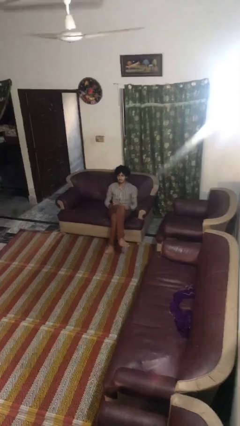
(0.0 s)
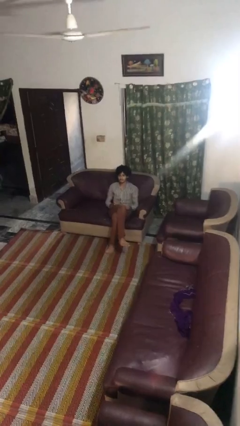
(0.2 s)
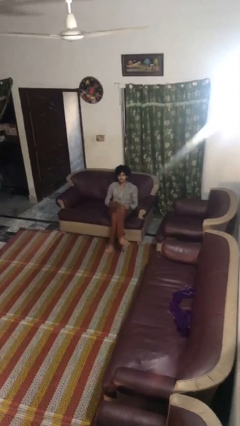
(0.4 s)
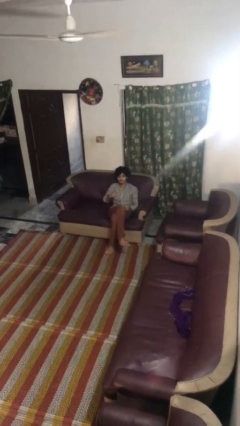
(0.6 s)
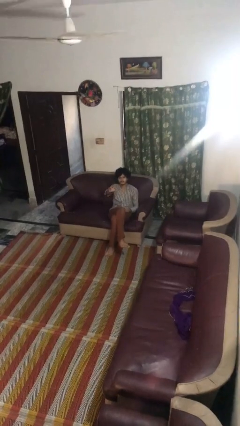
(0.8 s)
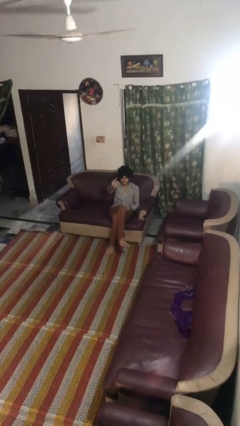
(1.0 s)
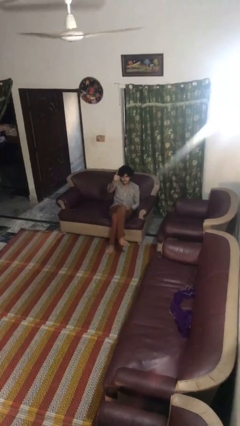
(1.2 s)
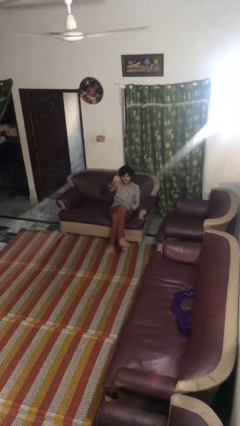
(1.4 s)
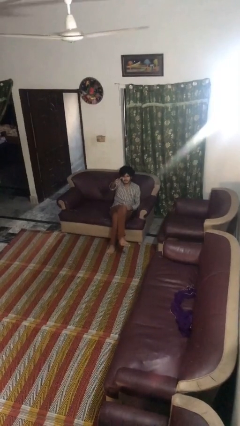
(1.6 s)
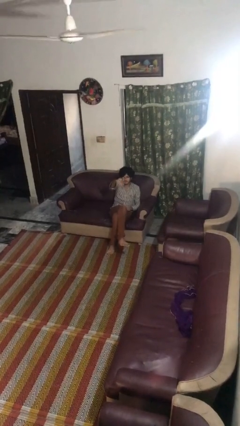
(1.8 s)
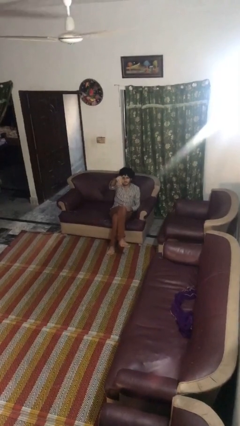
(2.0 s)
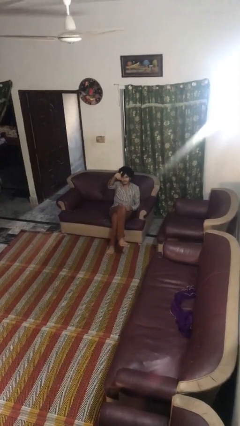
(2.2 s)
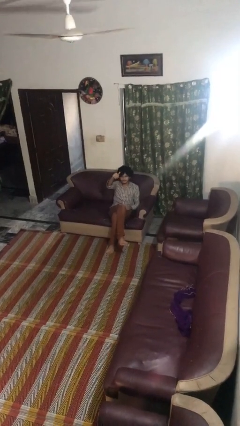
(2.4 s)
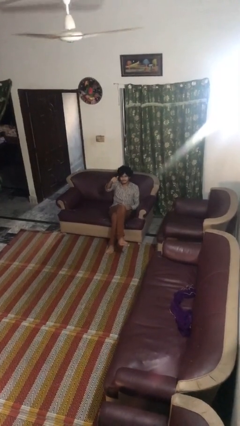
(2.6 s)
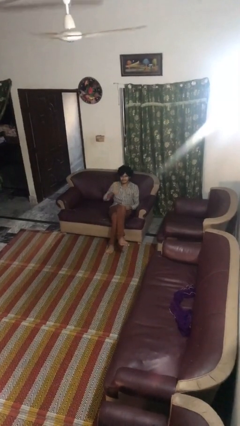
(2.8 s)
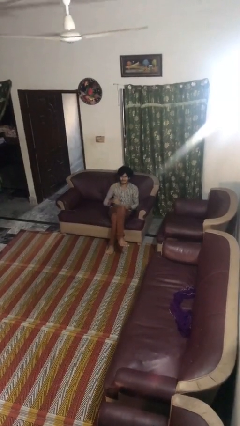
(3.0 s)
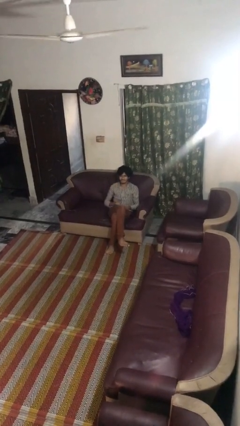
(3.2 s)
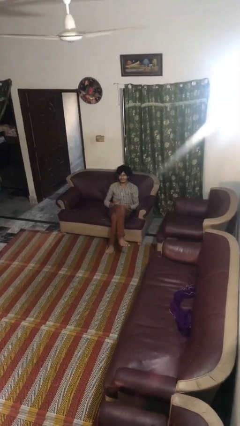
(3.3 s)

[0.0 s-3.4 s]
person gestures come here

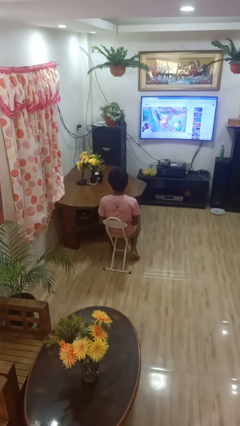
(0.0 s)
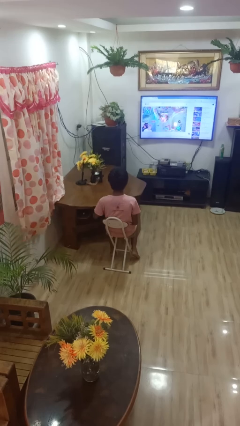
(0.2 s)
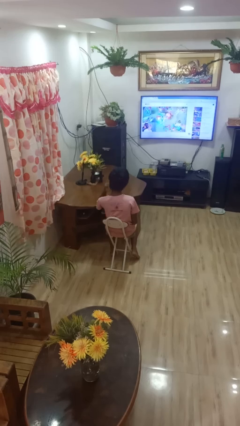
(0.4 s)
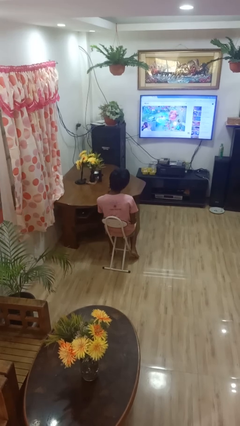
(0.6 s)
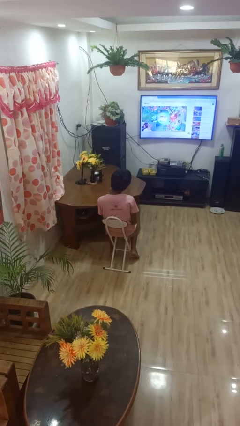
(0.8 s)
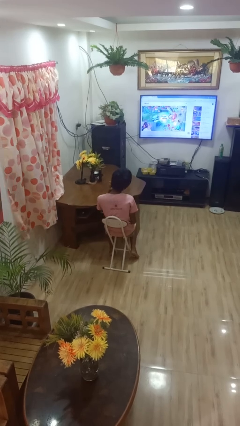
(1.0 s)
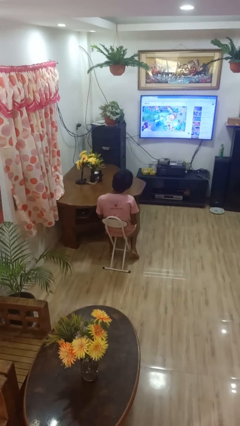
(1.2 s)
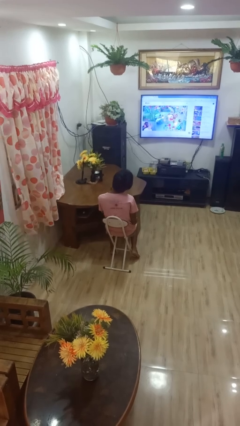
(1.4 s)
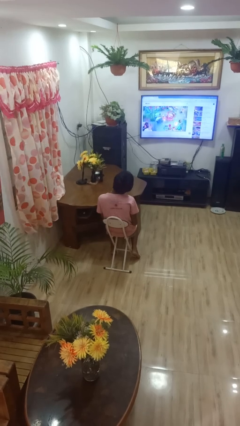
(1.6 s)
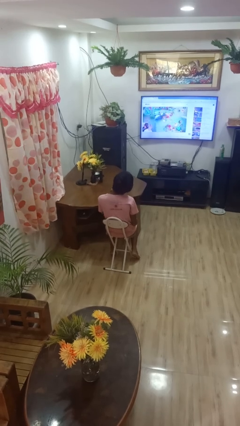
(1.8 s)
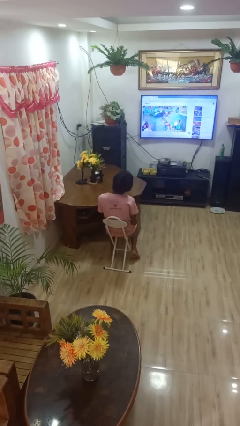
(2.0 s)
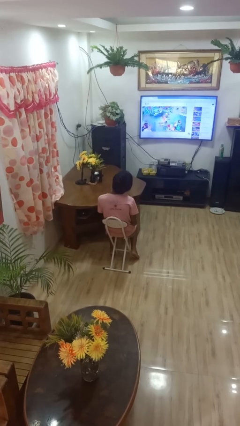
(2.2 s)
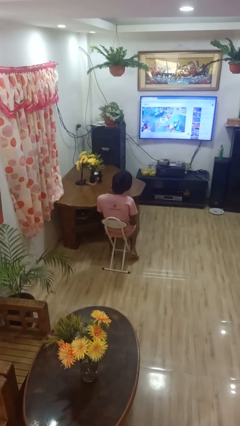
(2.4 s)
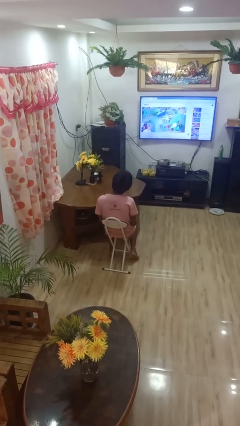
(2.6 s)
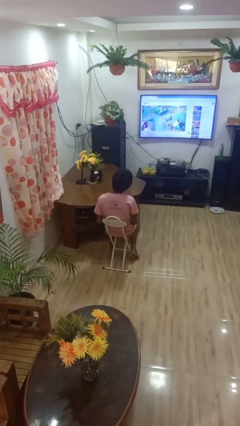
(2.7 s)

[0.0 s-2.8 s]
person rubs neck

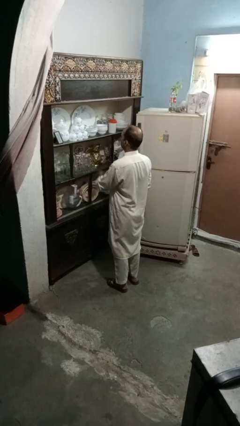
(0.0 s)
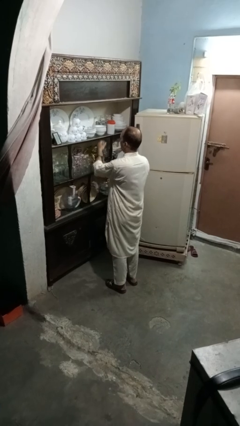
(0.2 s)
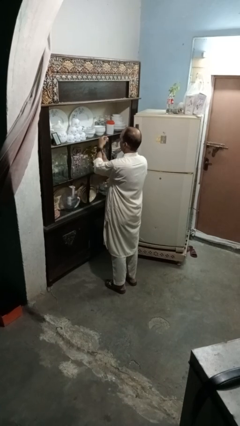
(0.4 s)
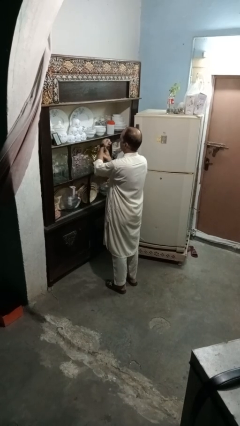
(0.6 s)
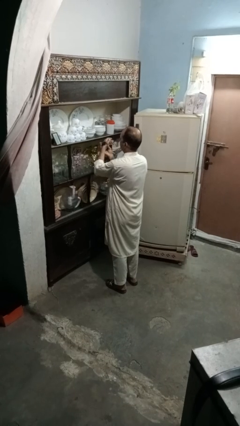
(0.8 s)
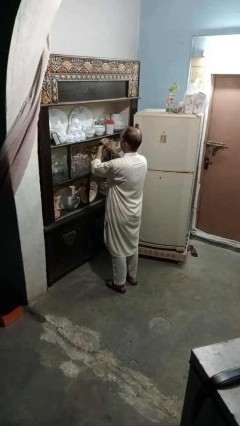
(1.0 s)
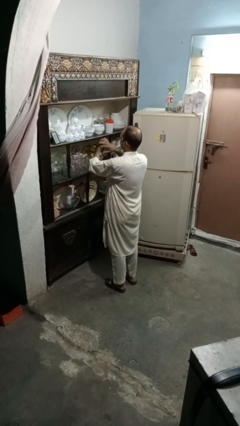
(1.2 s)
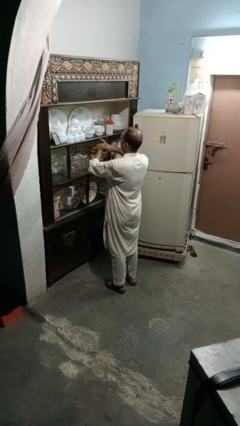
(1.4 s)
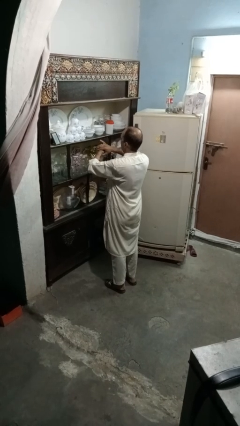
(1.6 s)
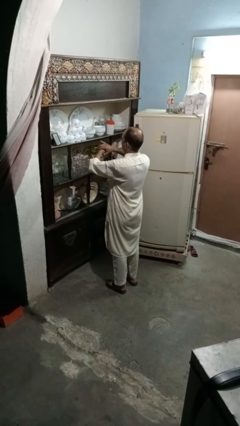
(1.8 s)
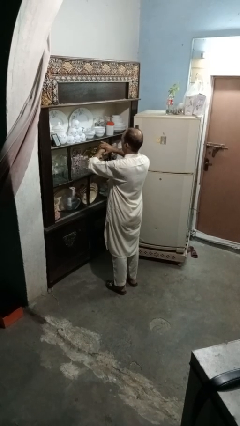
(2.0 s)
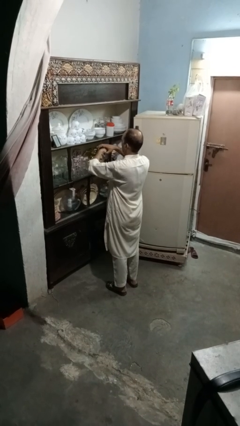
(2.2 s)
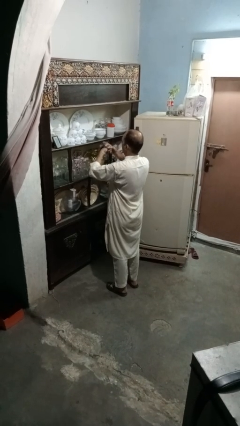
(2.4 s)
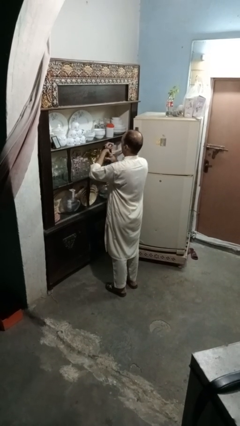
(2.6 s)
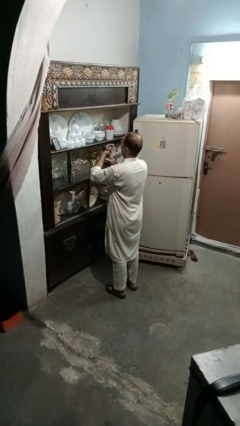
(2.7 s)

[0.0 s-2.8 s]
person takes off wristwatch

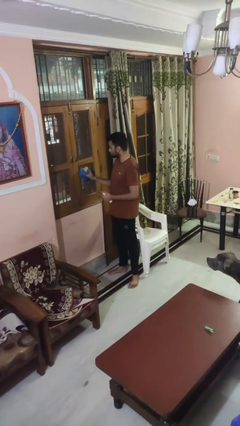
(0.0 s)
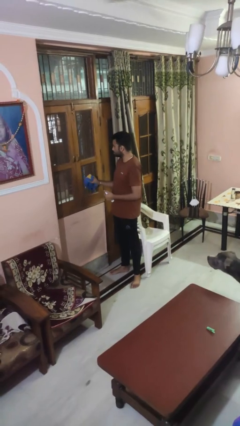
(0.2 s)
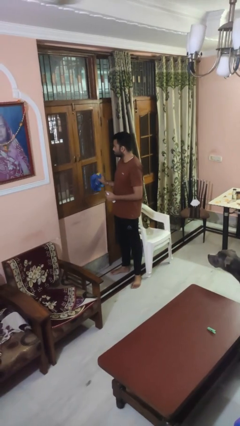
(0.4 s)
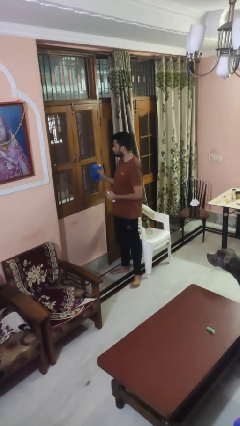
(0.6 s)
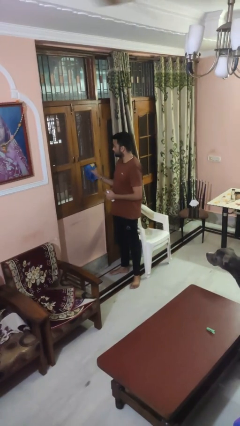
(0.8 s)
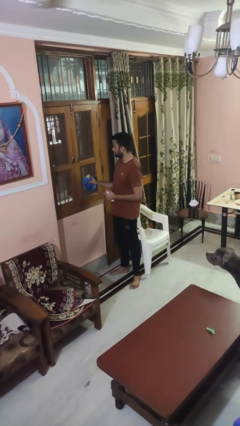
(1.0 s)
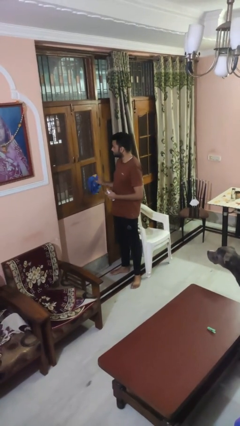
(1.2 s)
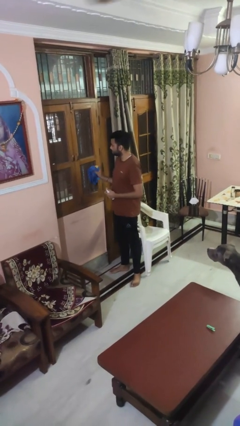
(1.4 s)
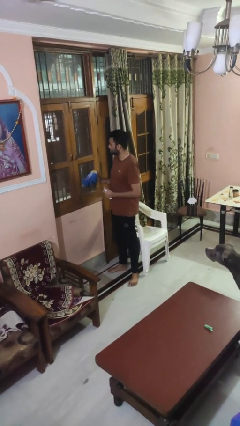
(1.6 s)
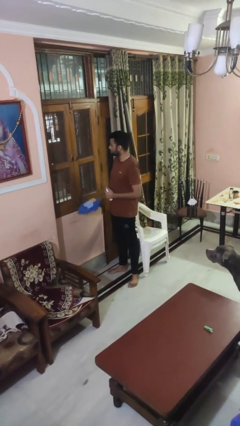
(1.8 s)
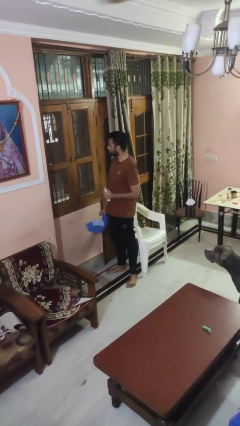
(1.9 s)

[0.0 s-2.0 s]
person washes window

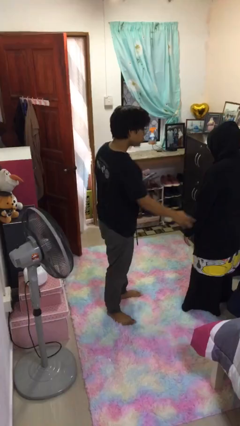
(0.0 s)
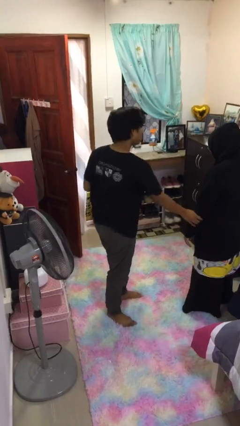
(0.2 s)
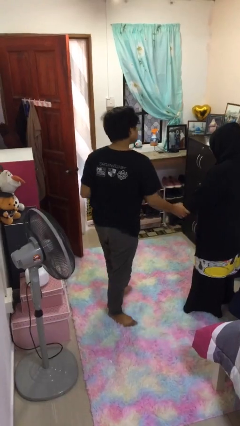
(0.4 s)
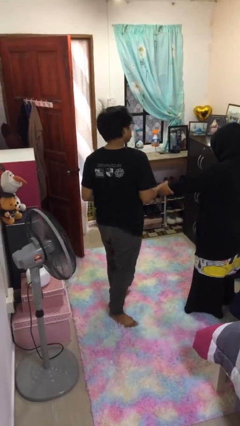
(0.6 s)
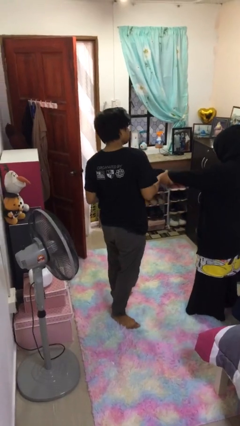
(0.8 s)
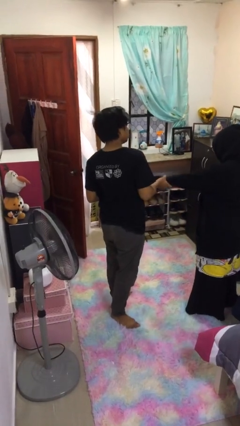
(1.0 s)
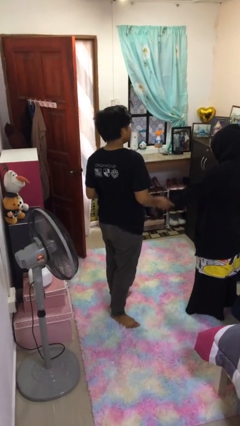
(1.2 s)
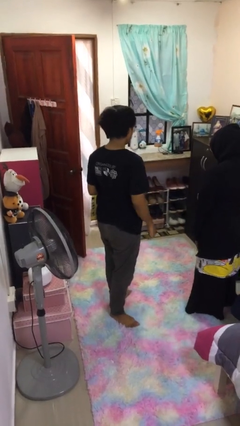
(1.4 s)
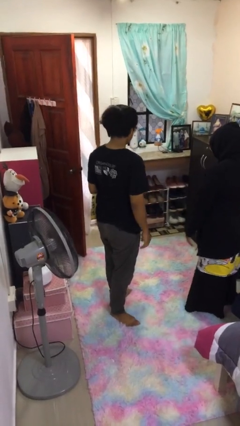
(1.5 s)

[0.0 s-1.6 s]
person grabs person by forearm

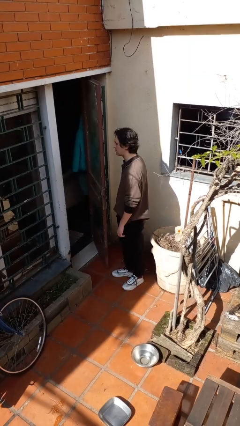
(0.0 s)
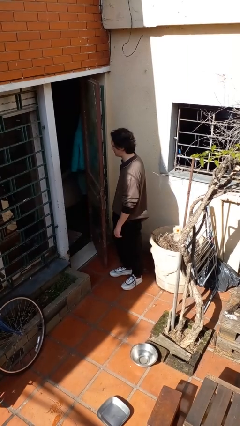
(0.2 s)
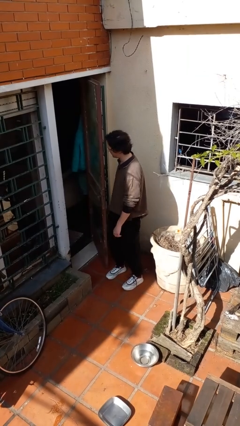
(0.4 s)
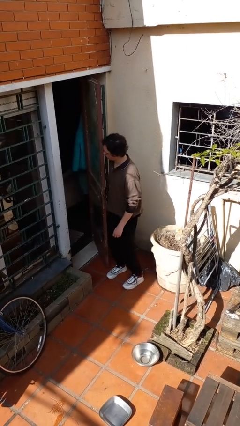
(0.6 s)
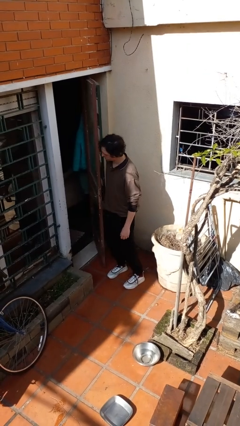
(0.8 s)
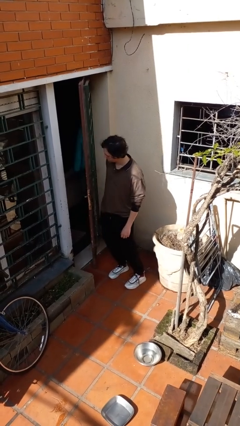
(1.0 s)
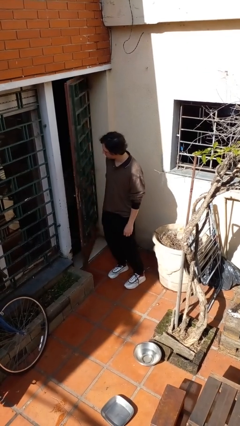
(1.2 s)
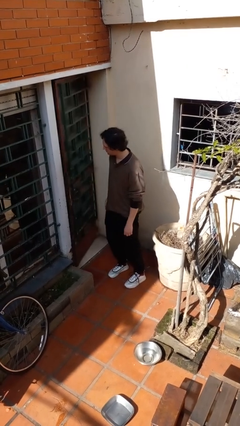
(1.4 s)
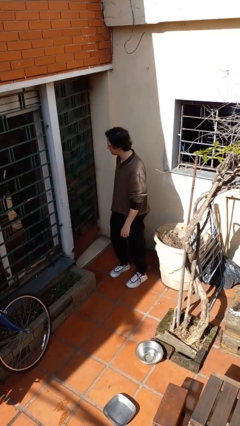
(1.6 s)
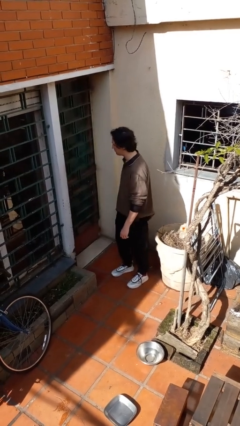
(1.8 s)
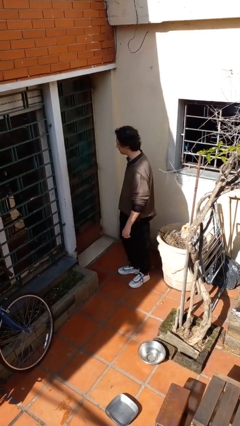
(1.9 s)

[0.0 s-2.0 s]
person closes door with hip

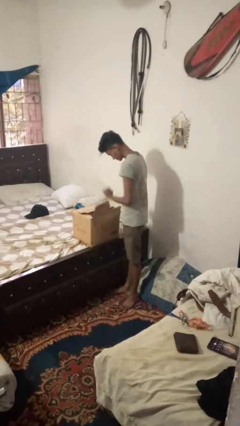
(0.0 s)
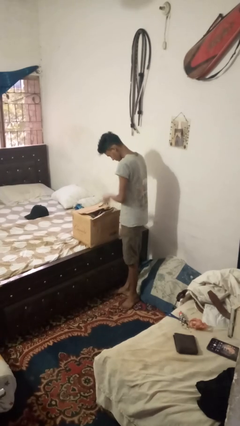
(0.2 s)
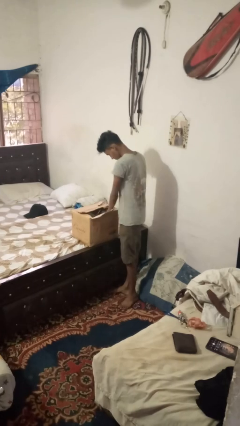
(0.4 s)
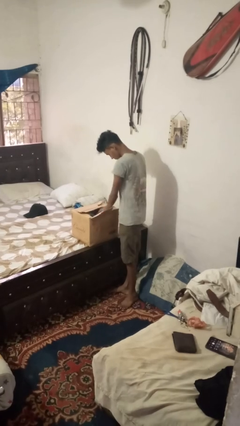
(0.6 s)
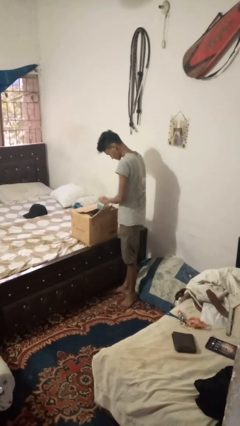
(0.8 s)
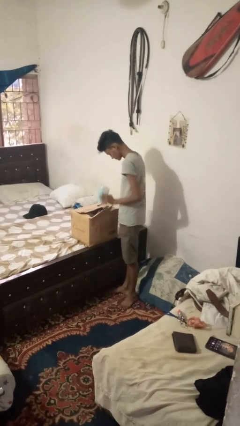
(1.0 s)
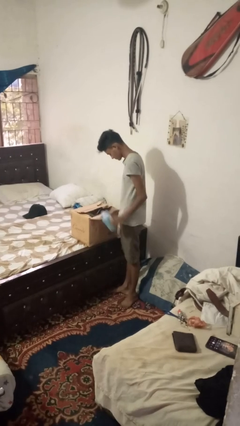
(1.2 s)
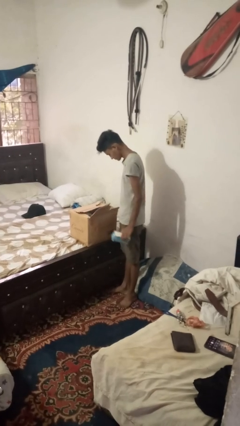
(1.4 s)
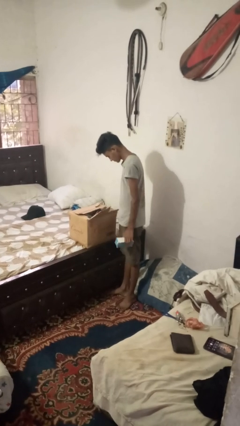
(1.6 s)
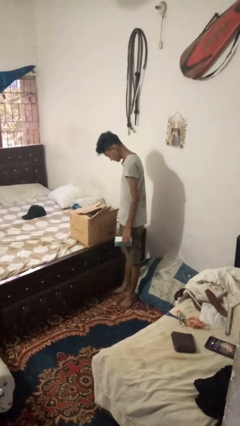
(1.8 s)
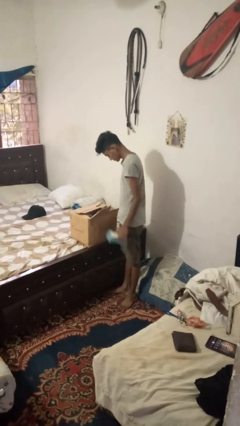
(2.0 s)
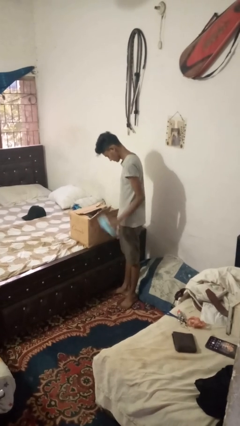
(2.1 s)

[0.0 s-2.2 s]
person takes object from box

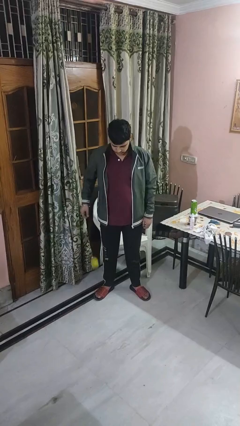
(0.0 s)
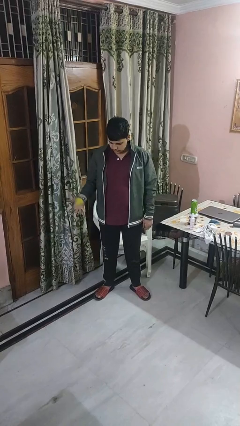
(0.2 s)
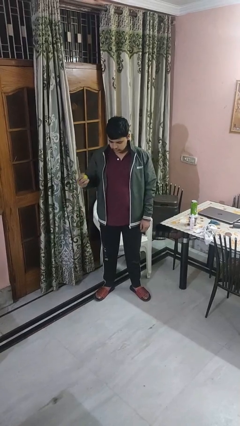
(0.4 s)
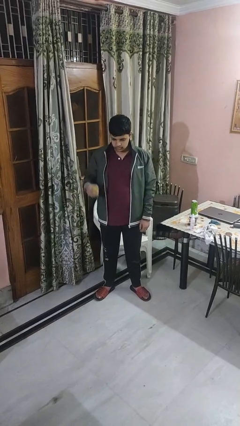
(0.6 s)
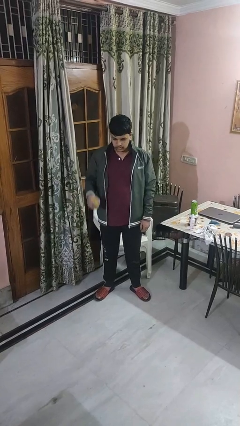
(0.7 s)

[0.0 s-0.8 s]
person bounces ball on floor
